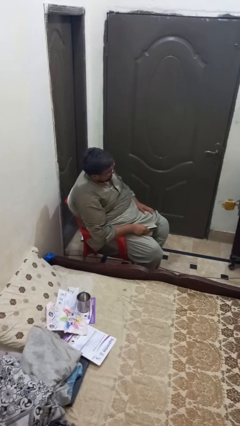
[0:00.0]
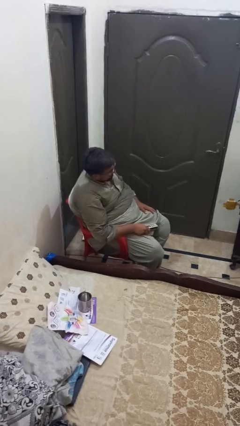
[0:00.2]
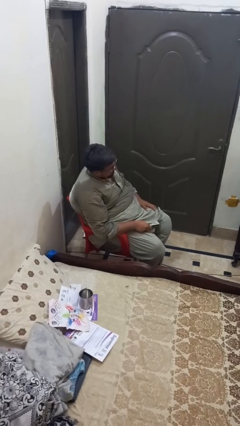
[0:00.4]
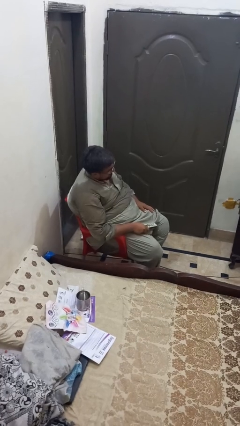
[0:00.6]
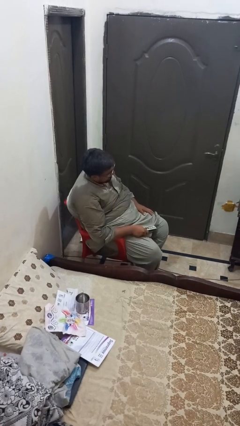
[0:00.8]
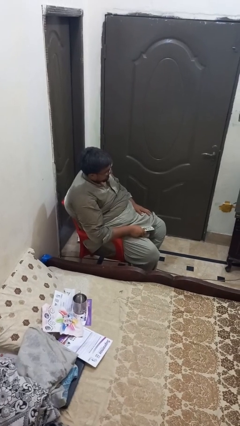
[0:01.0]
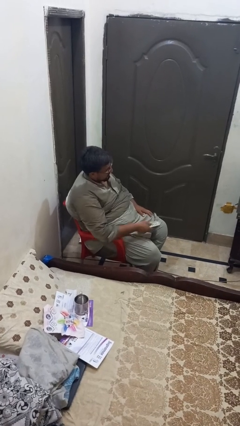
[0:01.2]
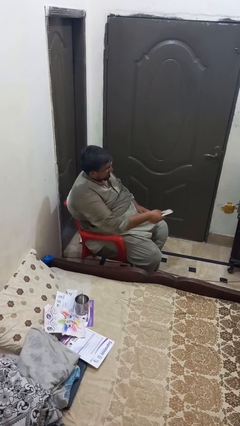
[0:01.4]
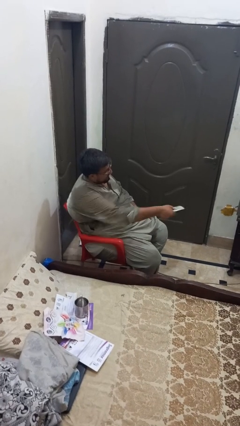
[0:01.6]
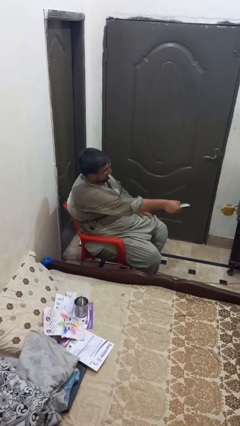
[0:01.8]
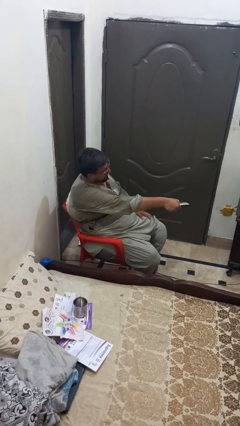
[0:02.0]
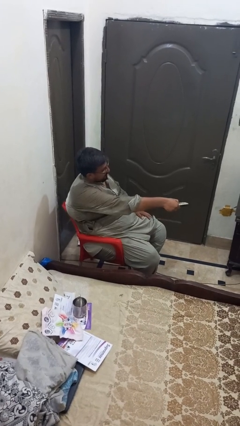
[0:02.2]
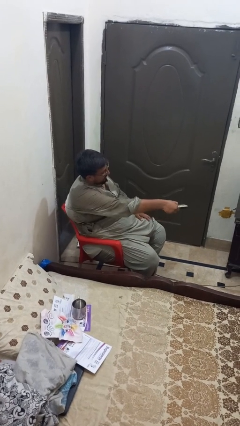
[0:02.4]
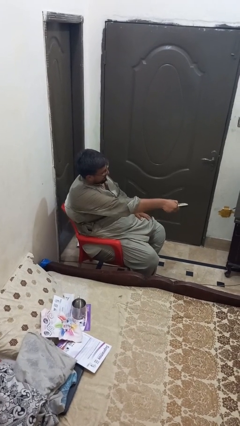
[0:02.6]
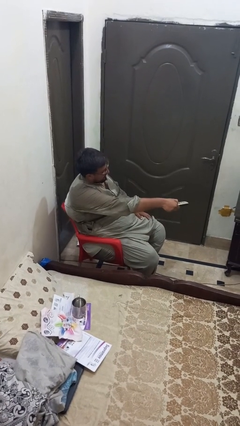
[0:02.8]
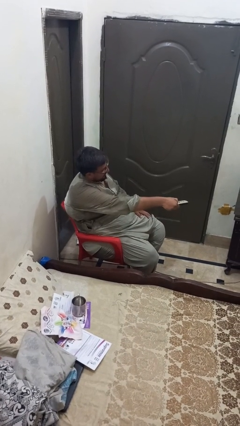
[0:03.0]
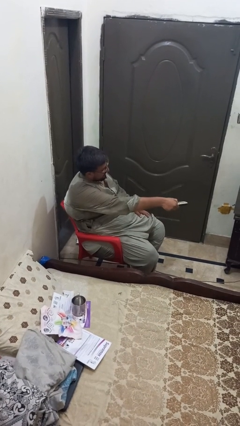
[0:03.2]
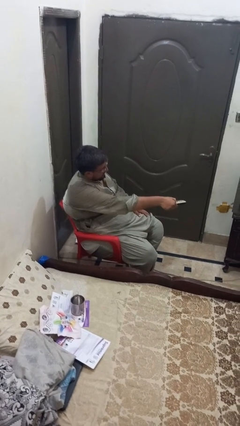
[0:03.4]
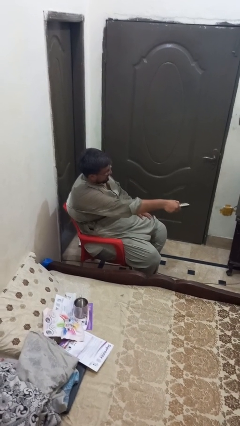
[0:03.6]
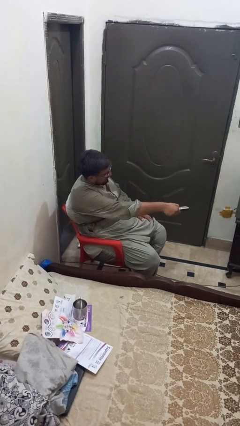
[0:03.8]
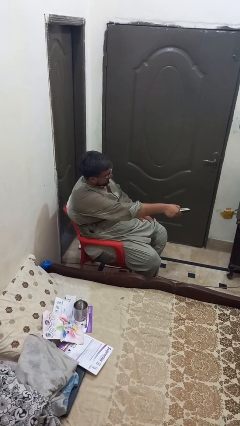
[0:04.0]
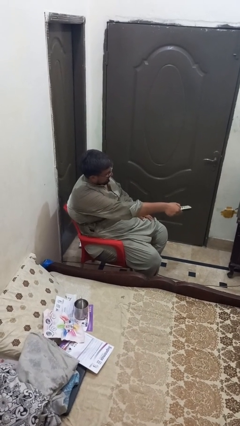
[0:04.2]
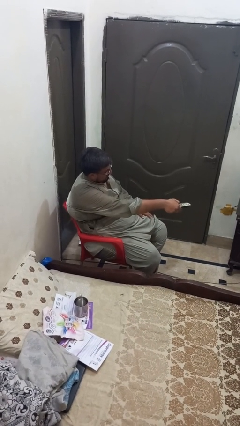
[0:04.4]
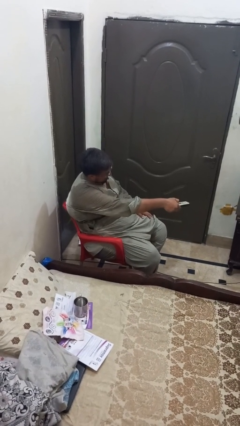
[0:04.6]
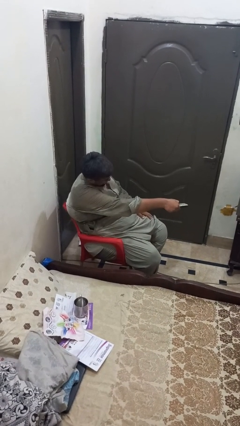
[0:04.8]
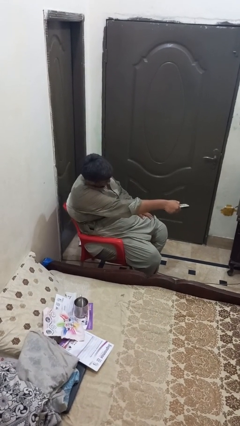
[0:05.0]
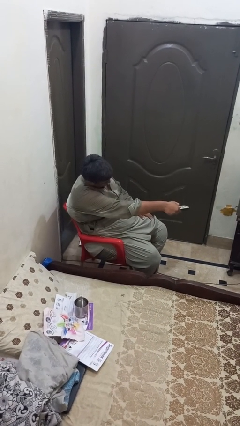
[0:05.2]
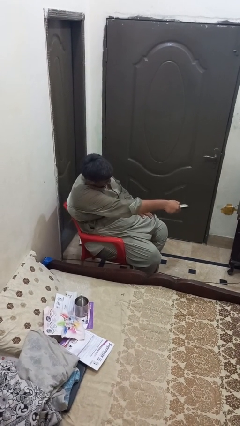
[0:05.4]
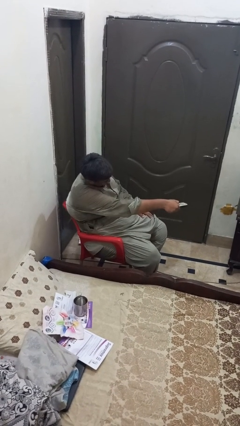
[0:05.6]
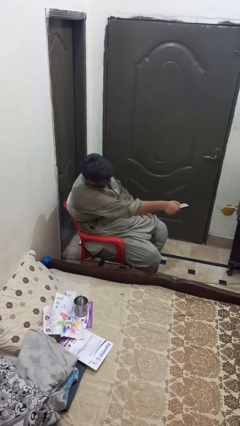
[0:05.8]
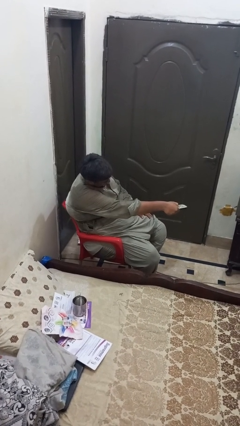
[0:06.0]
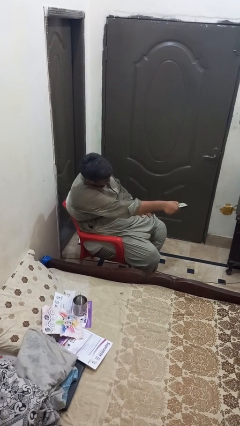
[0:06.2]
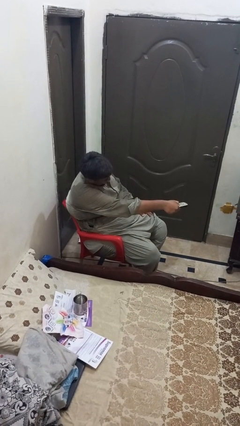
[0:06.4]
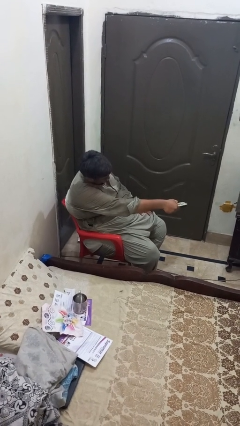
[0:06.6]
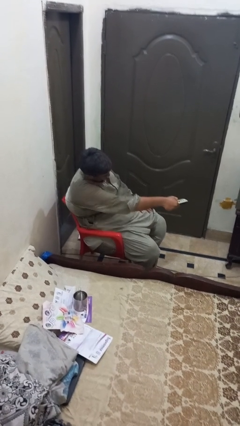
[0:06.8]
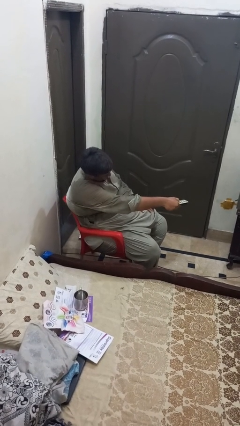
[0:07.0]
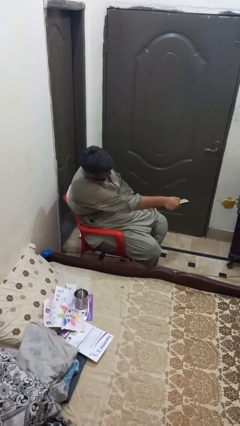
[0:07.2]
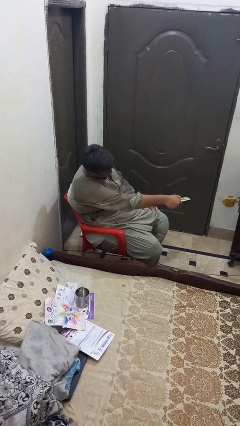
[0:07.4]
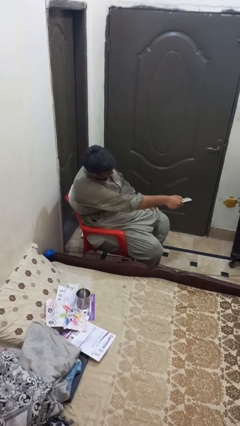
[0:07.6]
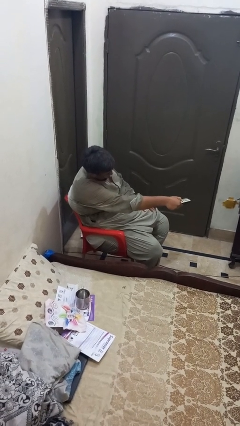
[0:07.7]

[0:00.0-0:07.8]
person uses television remote

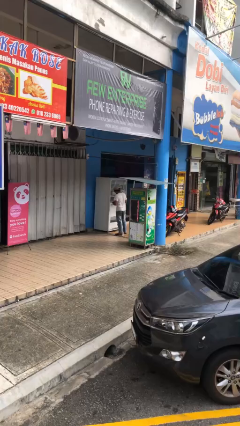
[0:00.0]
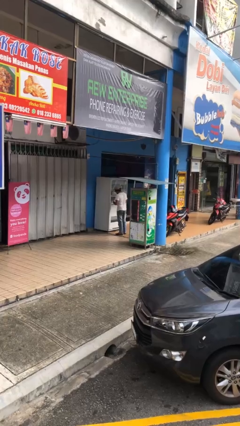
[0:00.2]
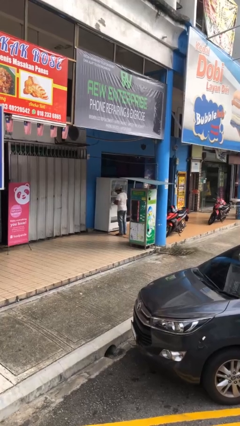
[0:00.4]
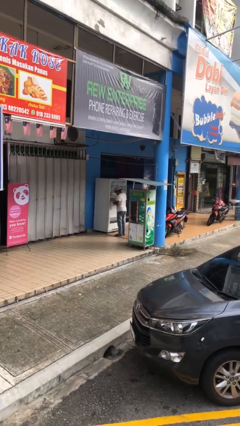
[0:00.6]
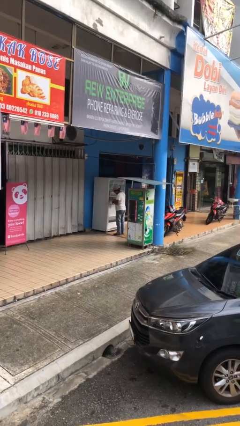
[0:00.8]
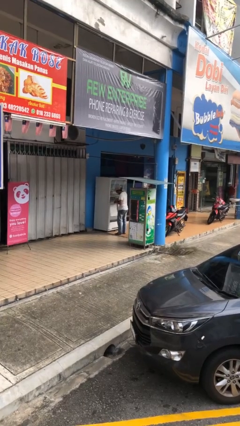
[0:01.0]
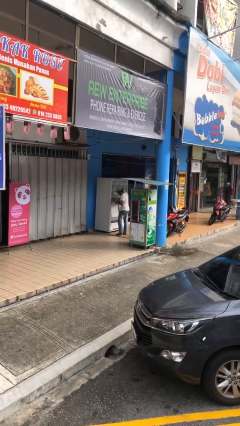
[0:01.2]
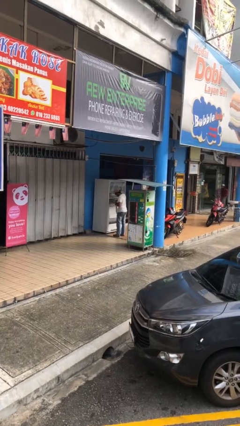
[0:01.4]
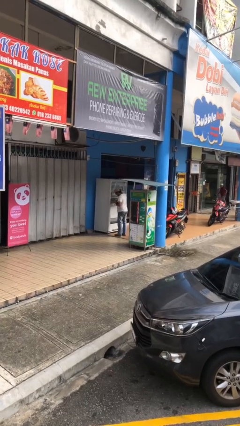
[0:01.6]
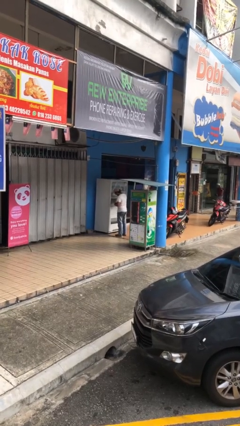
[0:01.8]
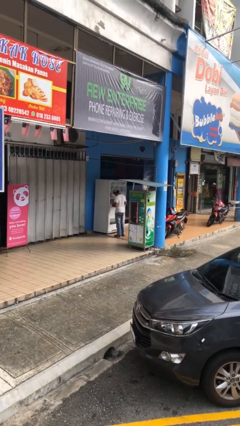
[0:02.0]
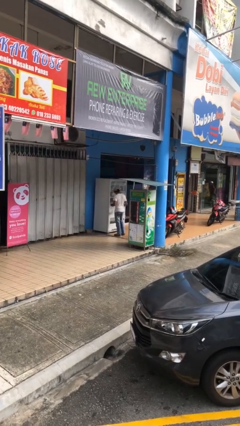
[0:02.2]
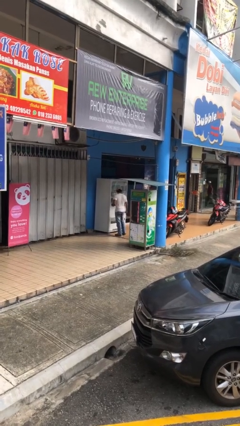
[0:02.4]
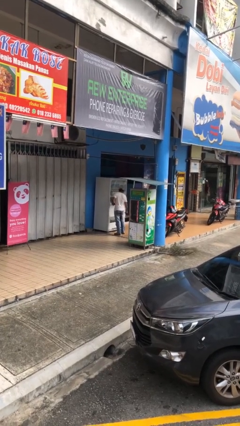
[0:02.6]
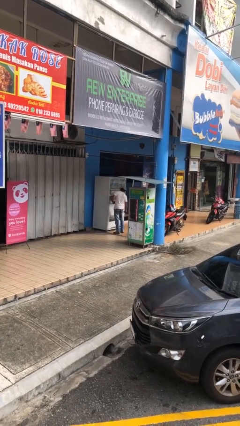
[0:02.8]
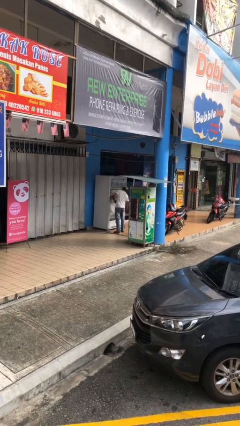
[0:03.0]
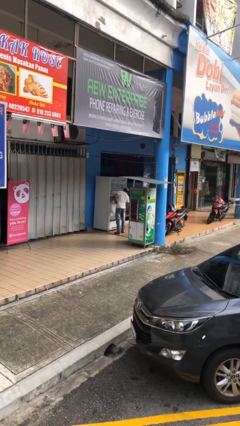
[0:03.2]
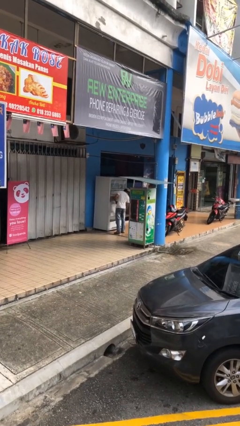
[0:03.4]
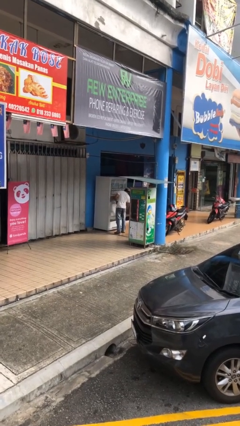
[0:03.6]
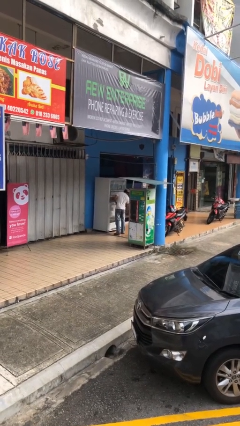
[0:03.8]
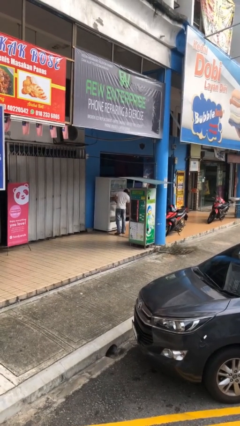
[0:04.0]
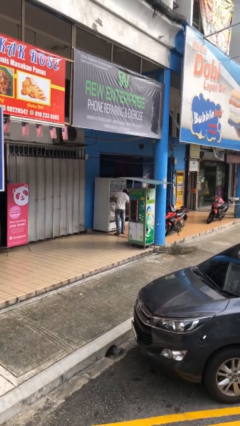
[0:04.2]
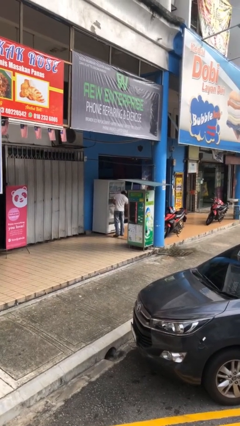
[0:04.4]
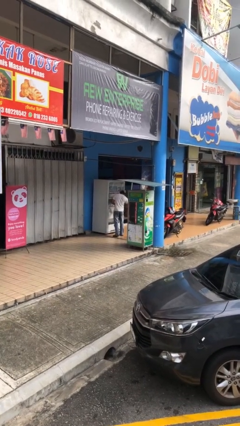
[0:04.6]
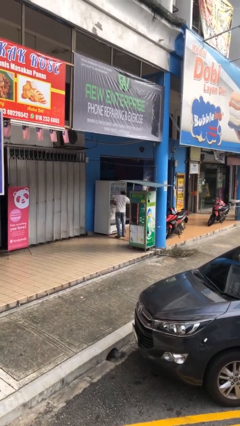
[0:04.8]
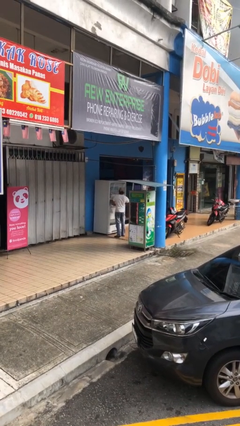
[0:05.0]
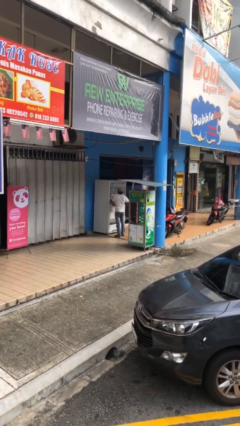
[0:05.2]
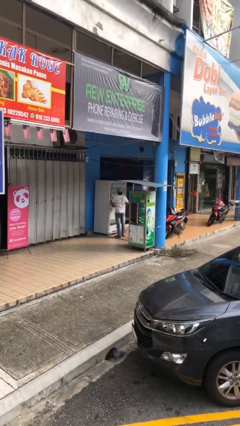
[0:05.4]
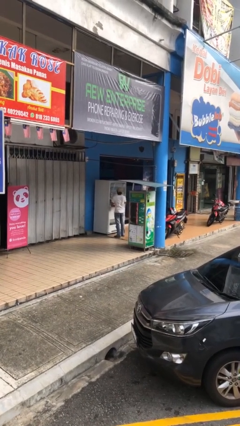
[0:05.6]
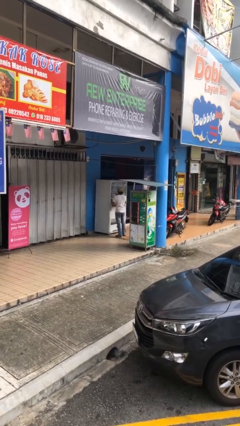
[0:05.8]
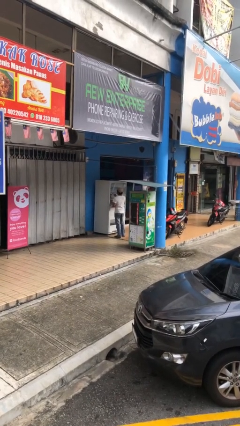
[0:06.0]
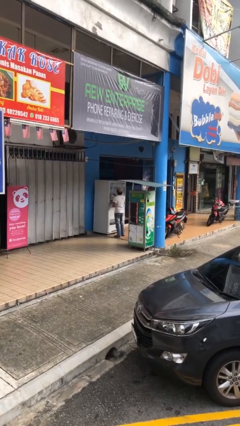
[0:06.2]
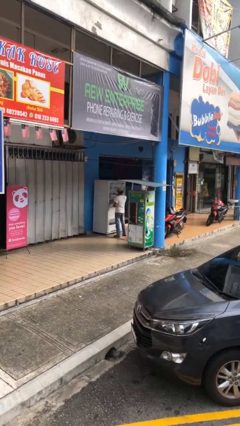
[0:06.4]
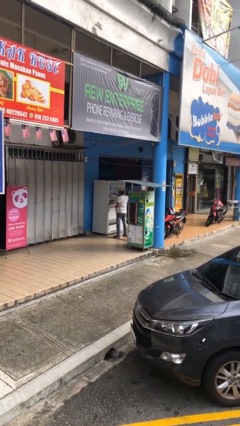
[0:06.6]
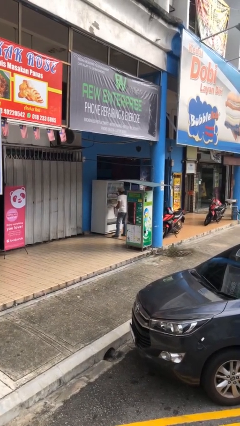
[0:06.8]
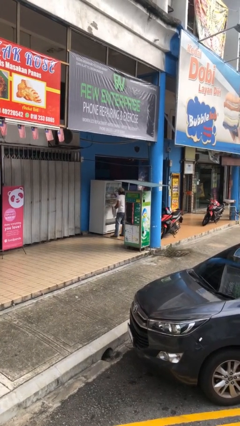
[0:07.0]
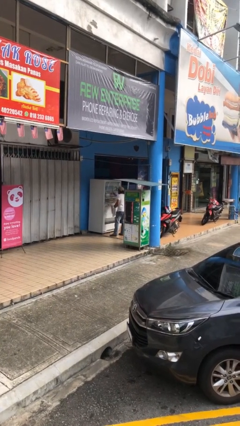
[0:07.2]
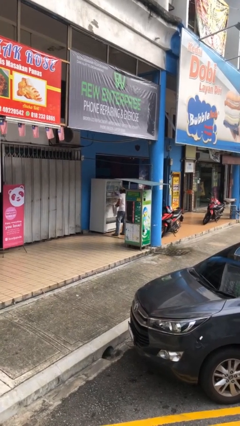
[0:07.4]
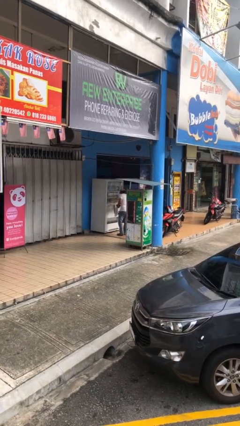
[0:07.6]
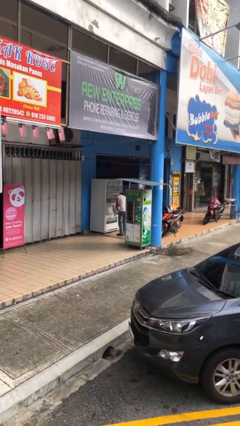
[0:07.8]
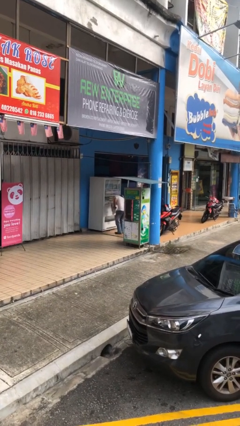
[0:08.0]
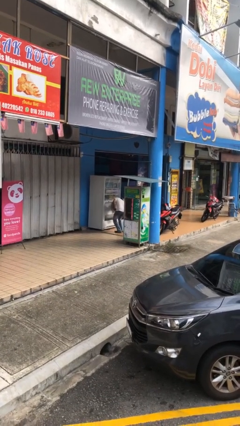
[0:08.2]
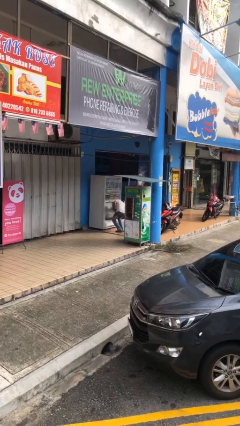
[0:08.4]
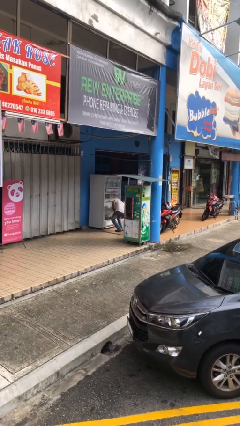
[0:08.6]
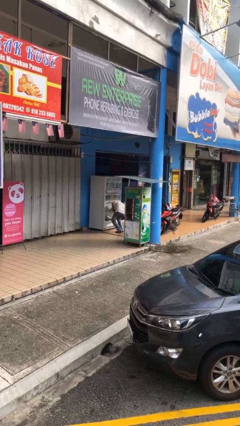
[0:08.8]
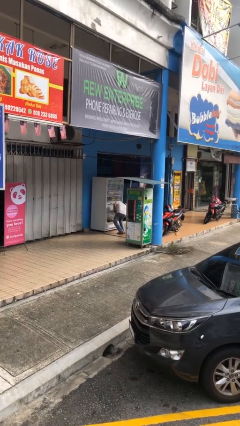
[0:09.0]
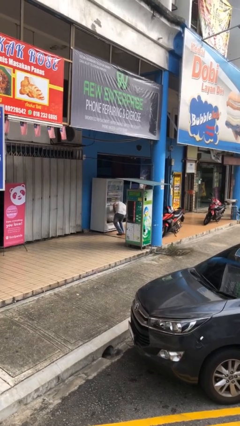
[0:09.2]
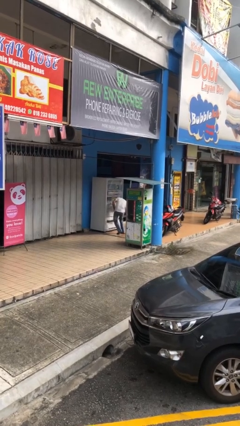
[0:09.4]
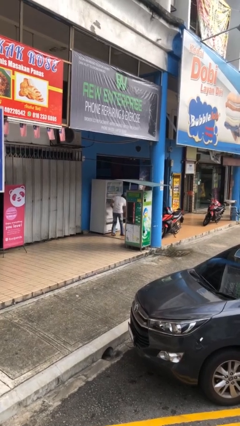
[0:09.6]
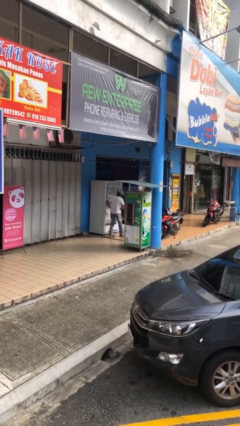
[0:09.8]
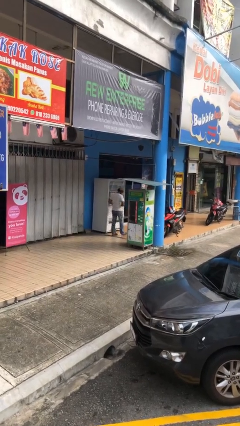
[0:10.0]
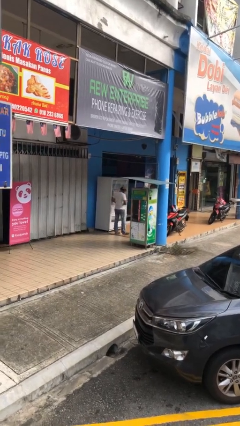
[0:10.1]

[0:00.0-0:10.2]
person purchases from machine
